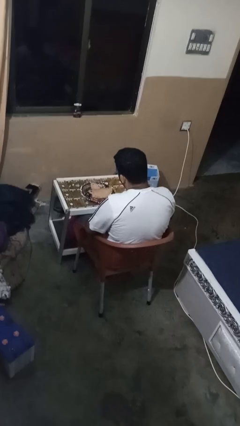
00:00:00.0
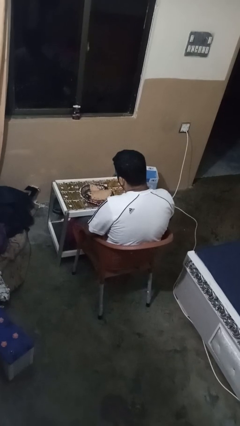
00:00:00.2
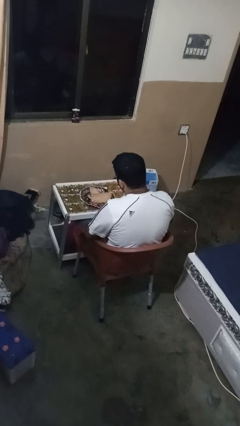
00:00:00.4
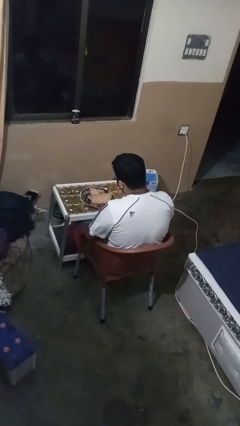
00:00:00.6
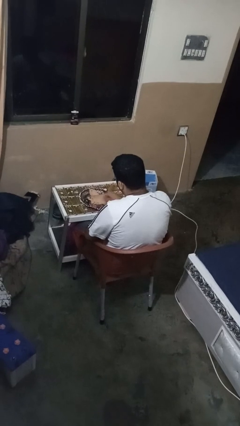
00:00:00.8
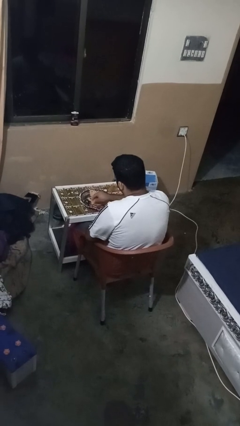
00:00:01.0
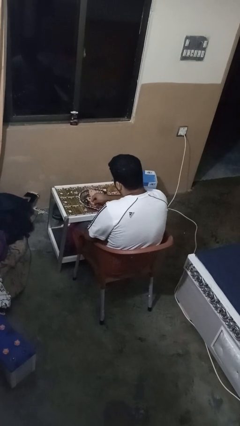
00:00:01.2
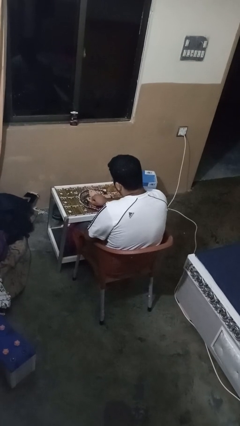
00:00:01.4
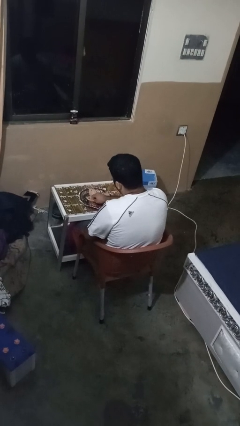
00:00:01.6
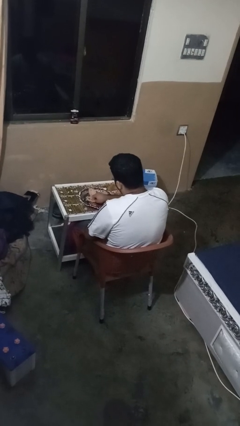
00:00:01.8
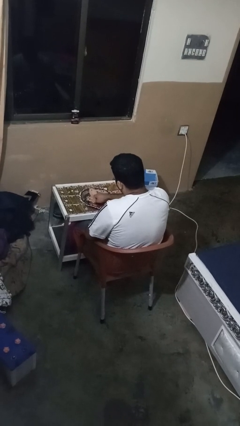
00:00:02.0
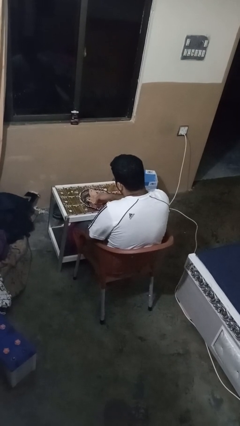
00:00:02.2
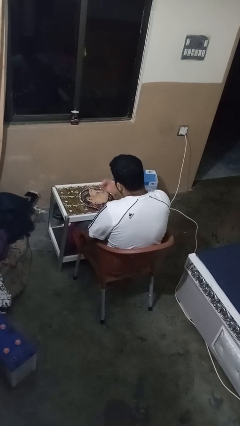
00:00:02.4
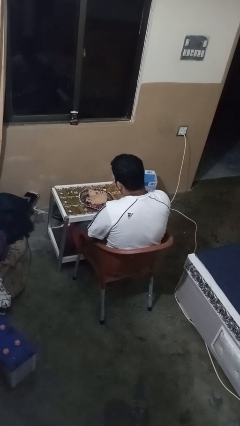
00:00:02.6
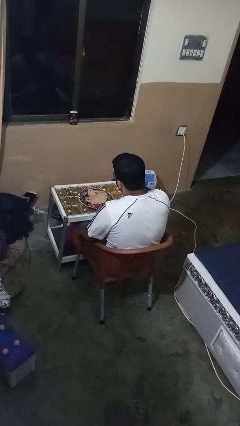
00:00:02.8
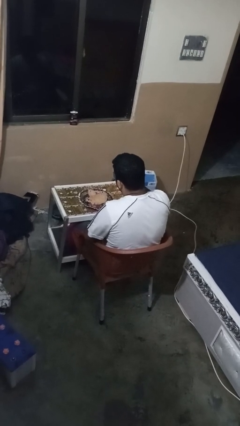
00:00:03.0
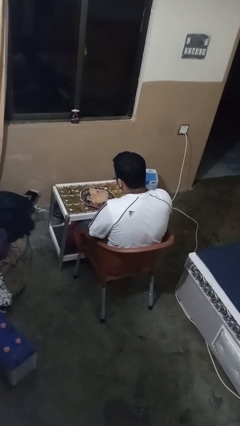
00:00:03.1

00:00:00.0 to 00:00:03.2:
person eats with hands

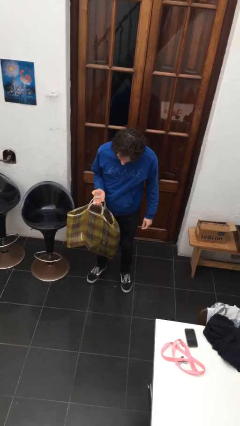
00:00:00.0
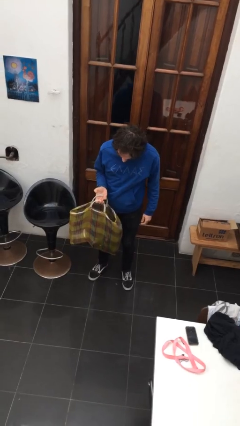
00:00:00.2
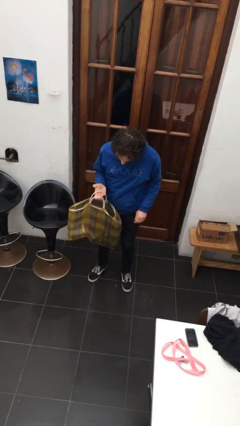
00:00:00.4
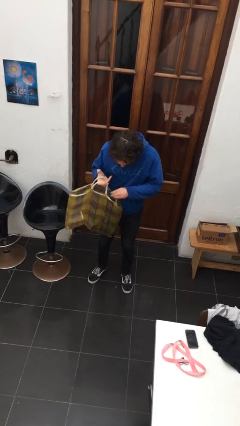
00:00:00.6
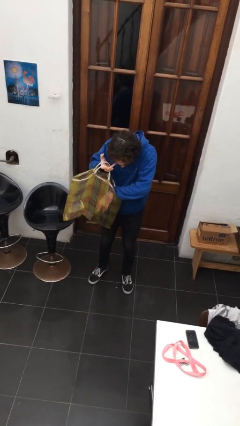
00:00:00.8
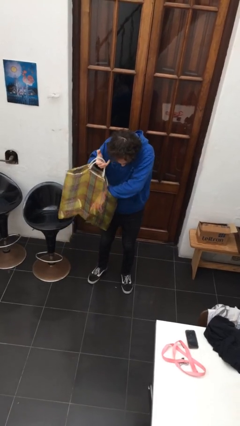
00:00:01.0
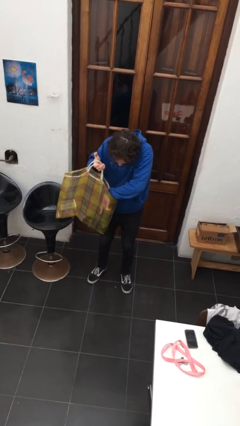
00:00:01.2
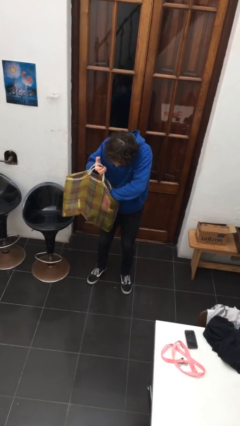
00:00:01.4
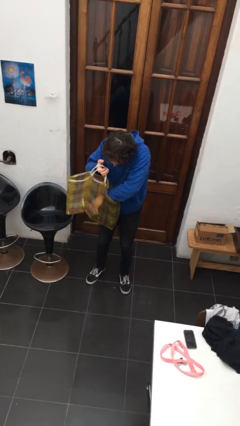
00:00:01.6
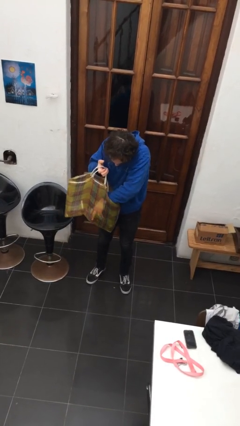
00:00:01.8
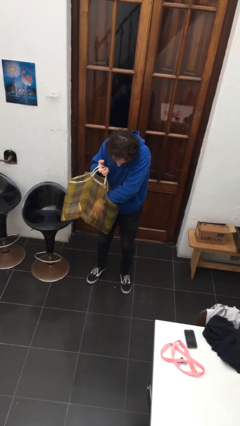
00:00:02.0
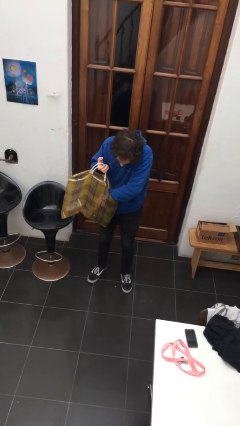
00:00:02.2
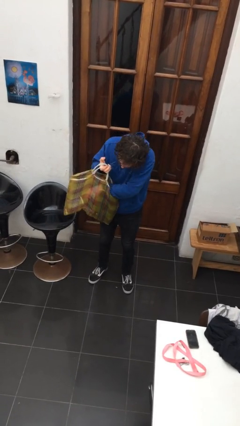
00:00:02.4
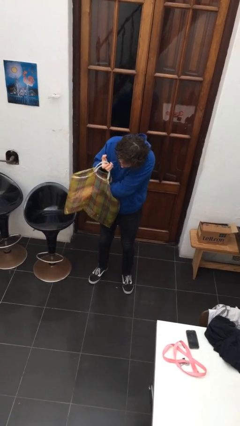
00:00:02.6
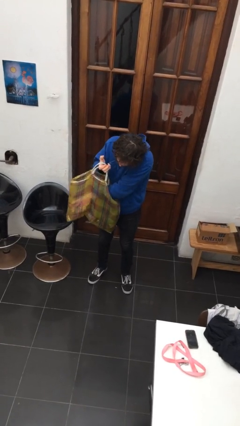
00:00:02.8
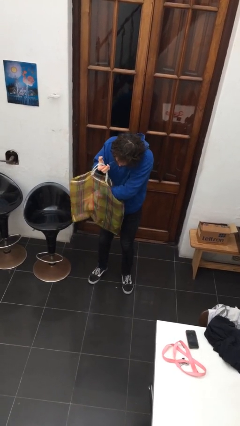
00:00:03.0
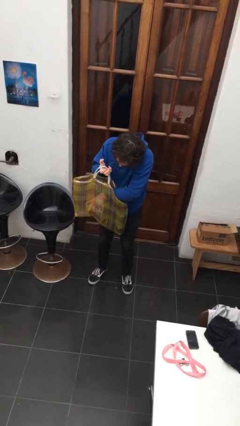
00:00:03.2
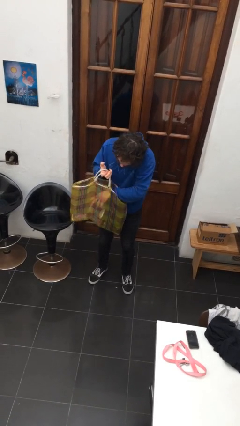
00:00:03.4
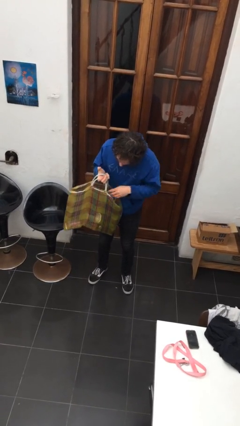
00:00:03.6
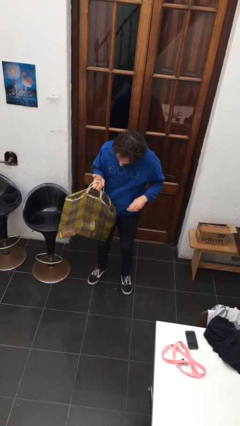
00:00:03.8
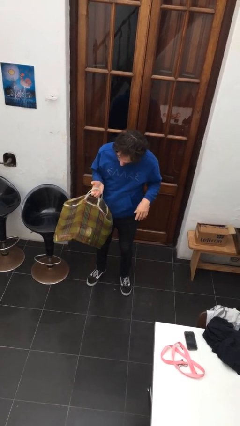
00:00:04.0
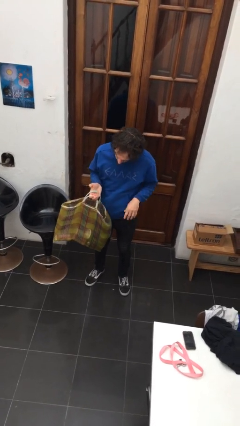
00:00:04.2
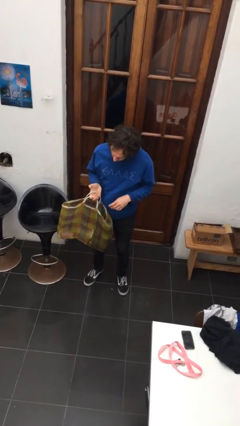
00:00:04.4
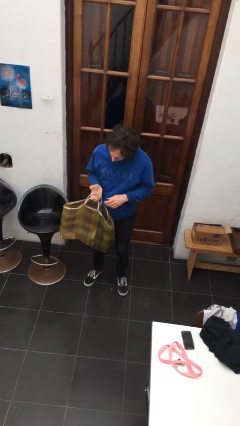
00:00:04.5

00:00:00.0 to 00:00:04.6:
person searches in bag

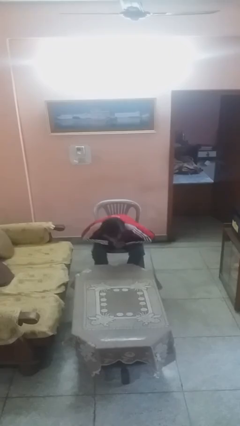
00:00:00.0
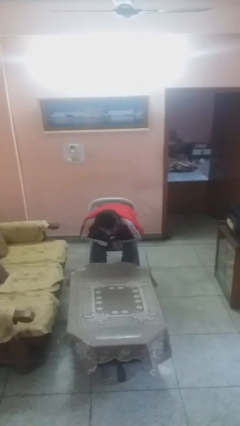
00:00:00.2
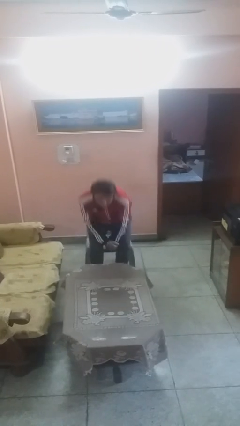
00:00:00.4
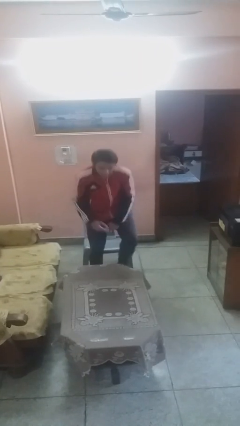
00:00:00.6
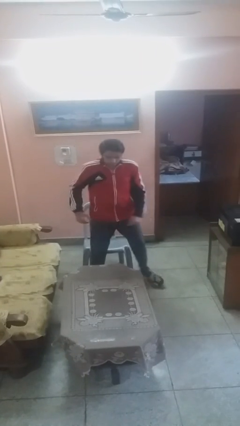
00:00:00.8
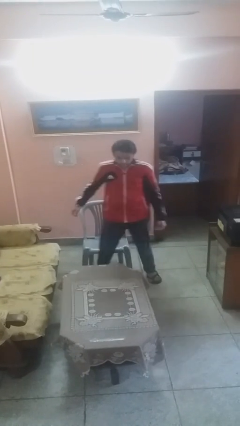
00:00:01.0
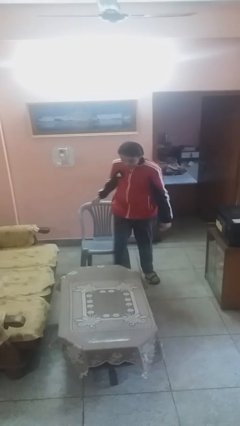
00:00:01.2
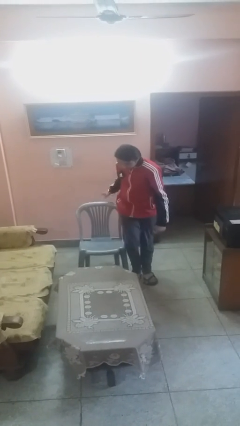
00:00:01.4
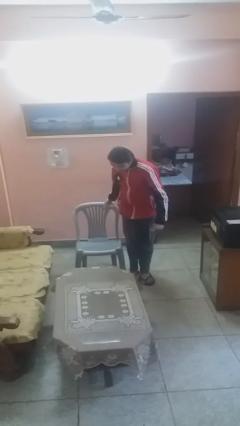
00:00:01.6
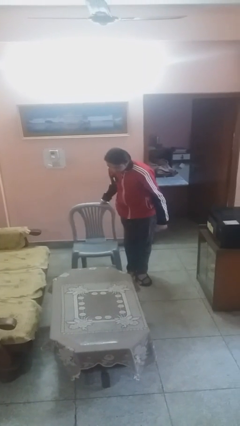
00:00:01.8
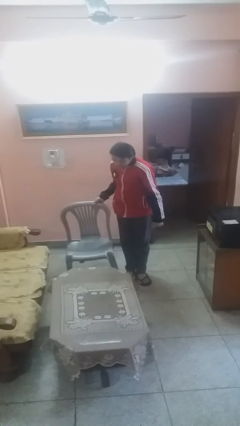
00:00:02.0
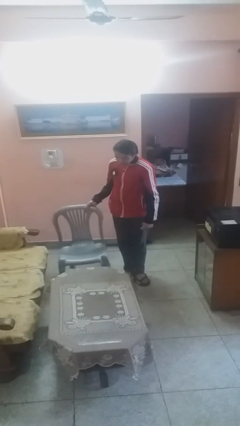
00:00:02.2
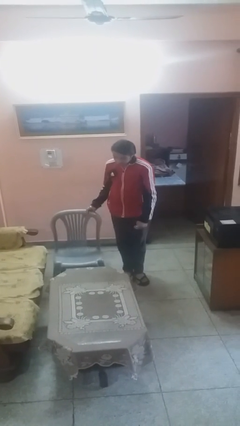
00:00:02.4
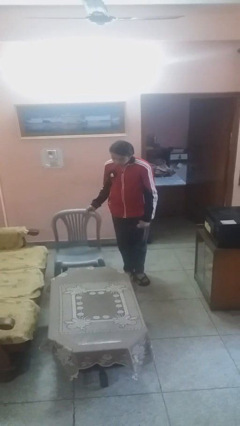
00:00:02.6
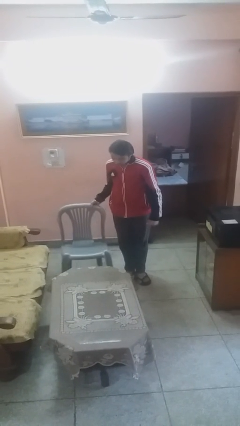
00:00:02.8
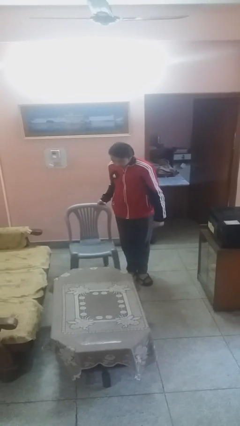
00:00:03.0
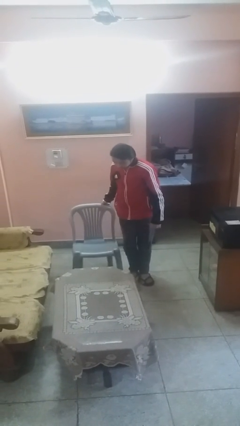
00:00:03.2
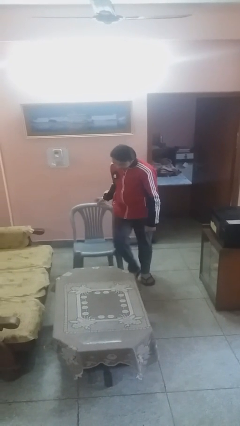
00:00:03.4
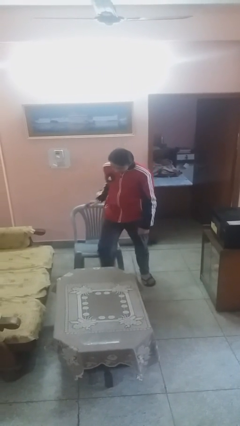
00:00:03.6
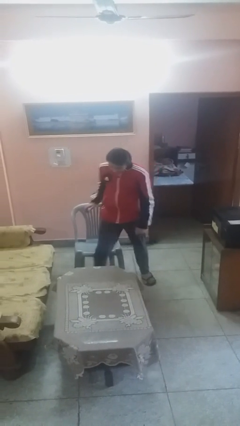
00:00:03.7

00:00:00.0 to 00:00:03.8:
person stands up

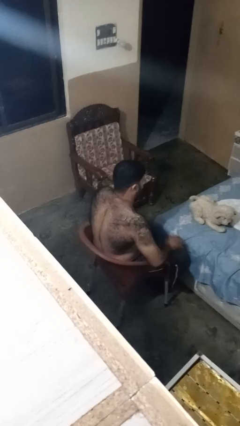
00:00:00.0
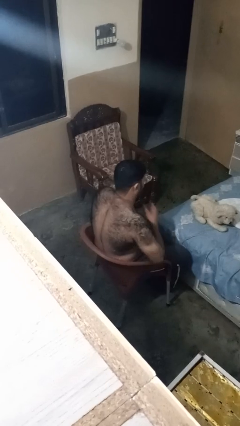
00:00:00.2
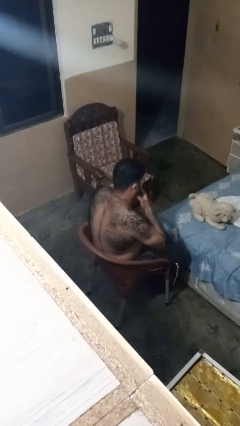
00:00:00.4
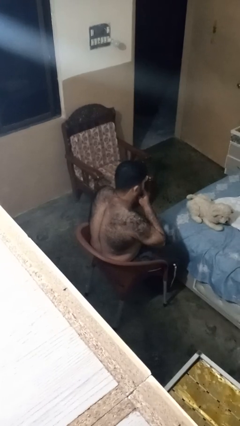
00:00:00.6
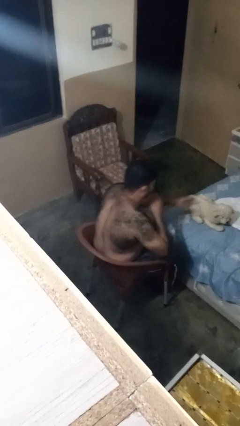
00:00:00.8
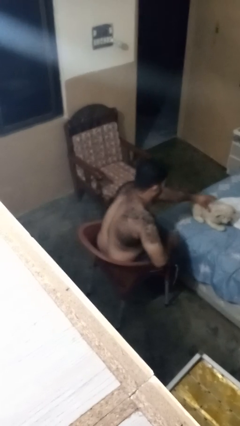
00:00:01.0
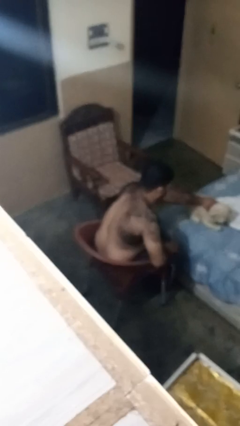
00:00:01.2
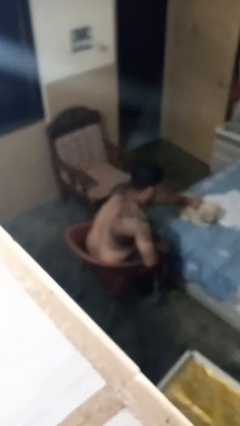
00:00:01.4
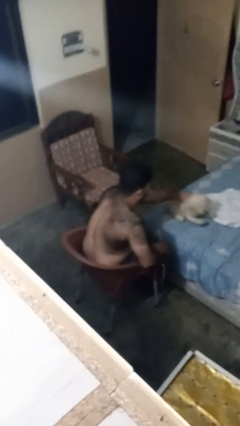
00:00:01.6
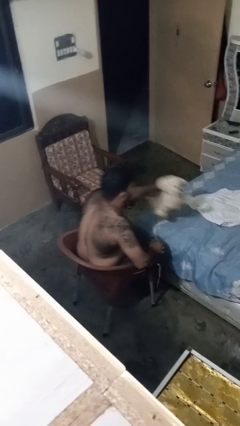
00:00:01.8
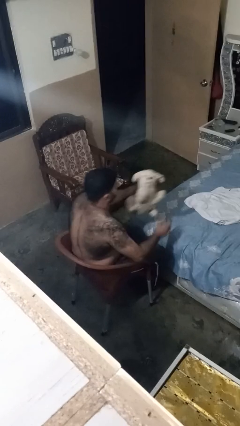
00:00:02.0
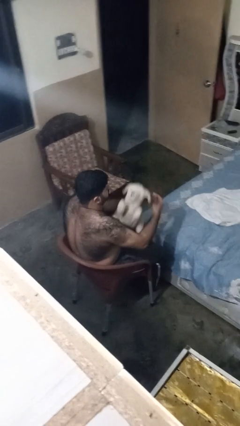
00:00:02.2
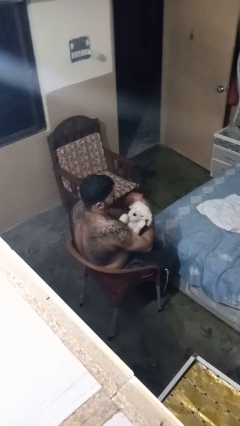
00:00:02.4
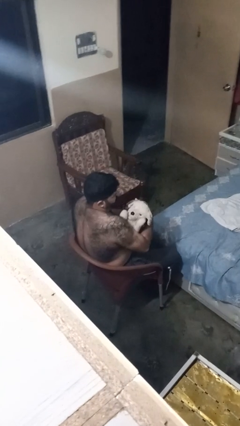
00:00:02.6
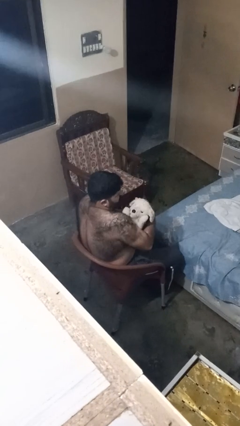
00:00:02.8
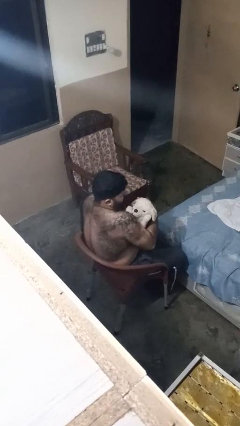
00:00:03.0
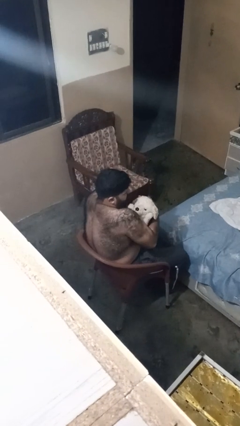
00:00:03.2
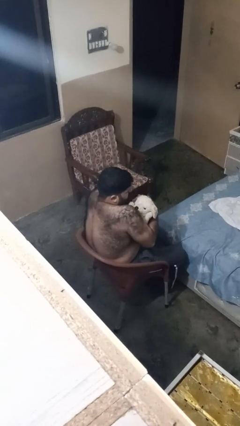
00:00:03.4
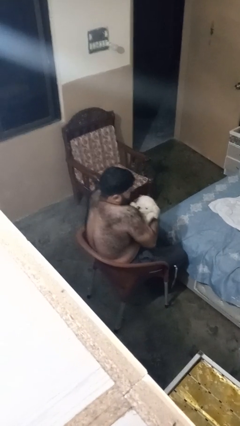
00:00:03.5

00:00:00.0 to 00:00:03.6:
person hugs stuffed animal

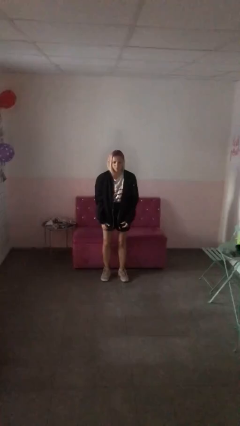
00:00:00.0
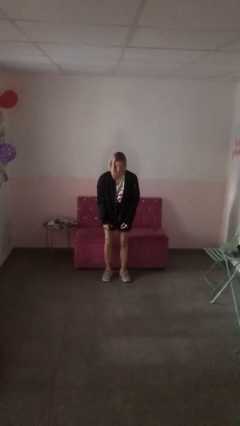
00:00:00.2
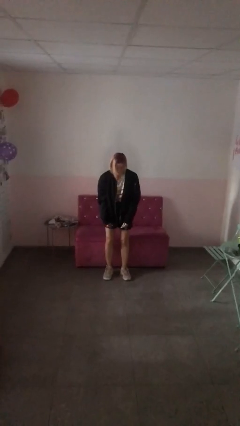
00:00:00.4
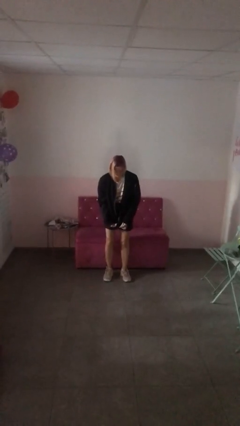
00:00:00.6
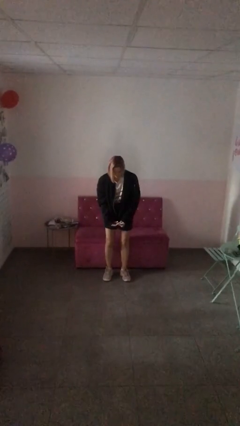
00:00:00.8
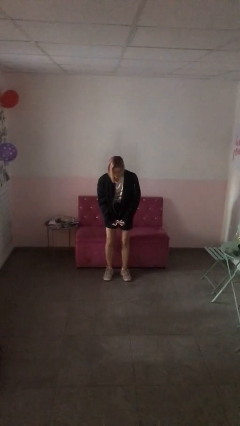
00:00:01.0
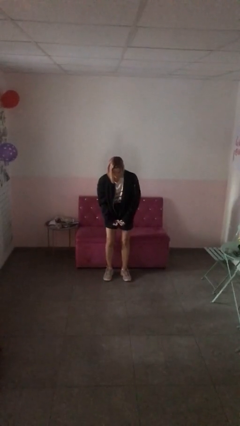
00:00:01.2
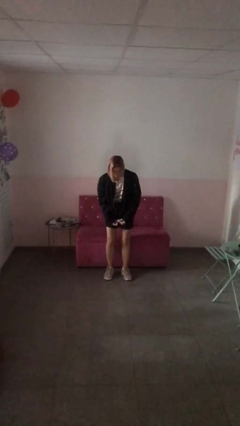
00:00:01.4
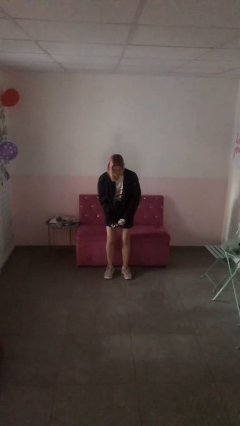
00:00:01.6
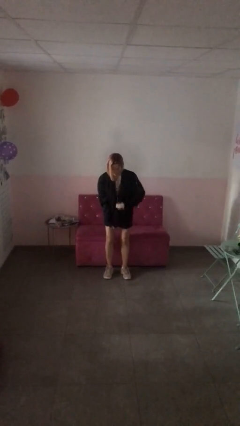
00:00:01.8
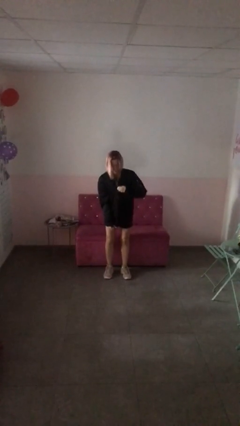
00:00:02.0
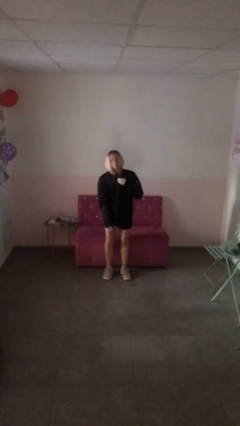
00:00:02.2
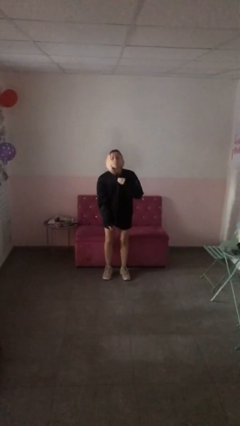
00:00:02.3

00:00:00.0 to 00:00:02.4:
person zips up jacket

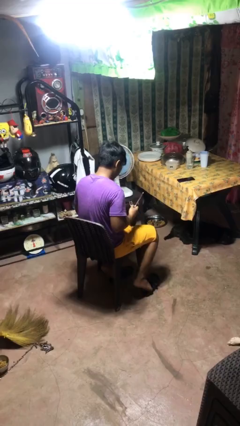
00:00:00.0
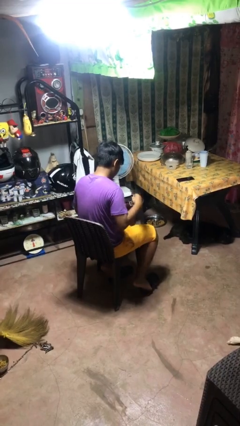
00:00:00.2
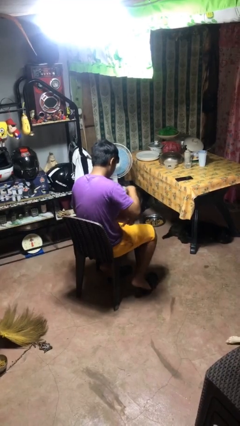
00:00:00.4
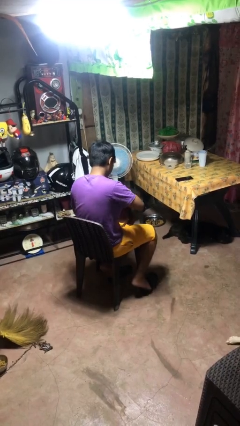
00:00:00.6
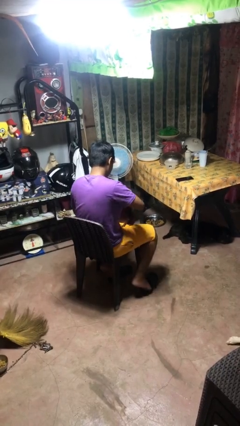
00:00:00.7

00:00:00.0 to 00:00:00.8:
person puts object into purse
